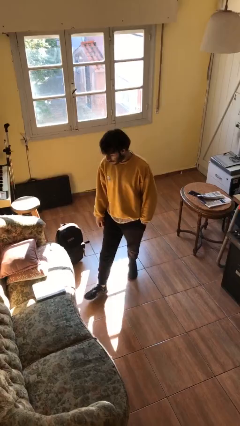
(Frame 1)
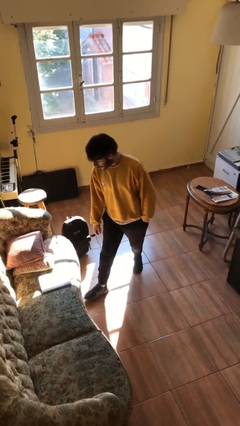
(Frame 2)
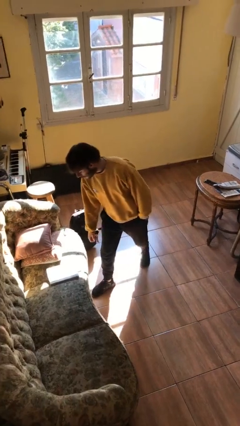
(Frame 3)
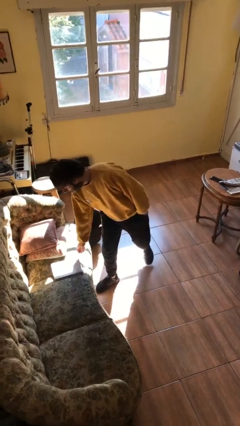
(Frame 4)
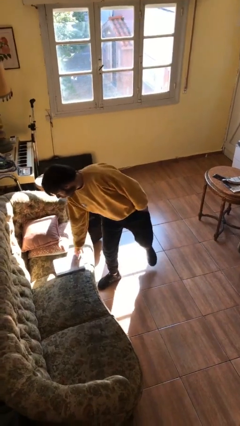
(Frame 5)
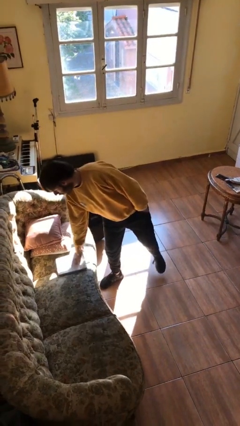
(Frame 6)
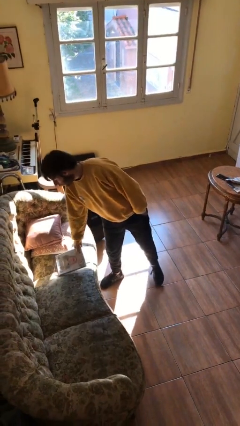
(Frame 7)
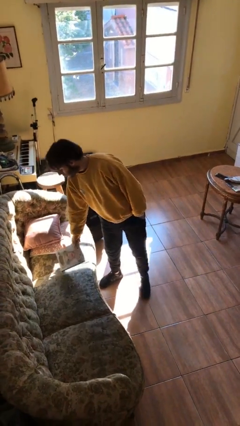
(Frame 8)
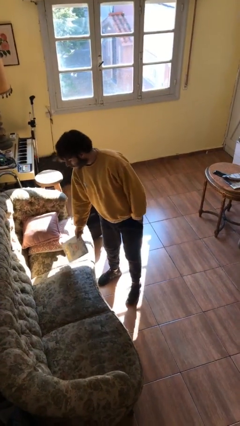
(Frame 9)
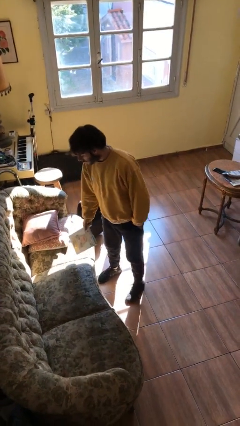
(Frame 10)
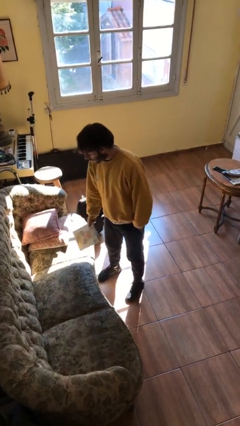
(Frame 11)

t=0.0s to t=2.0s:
person picks up object from couch

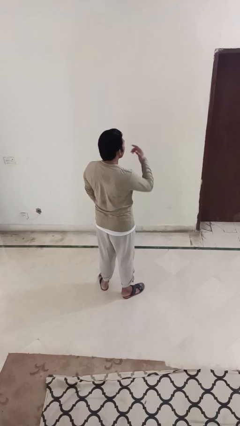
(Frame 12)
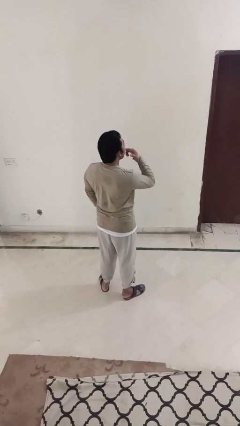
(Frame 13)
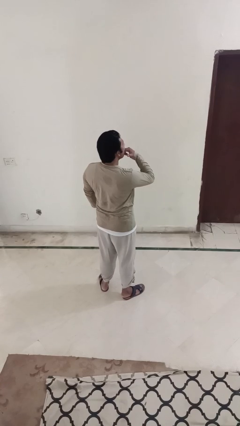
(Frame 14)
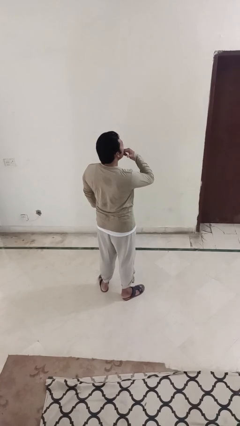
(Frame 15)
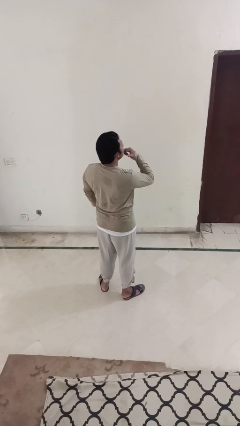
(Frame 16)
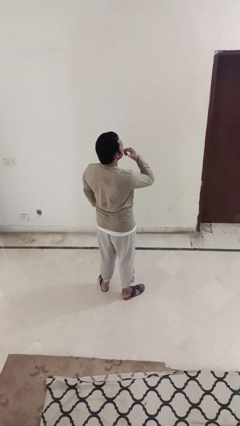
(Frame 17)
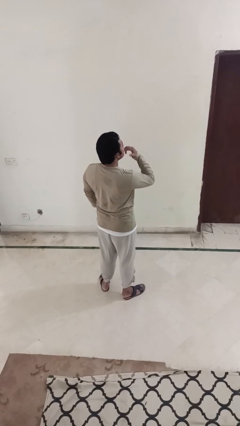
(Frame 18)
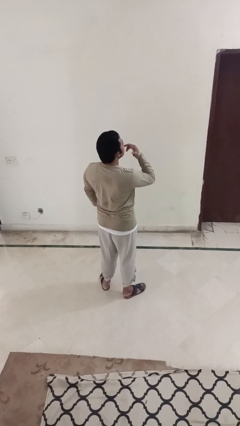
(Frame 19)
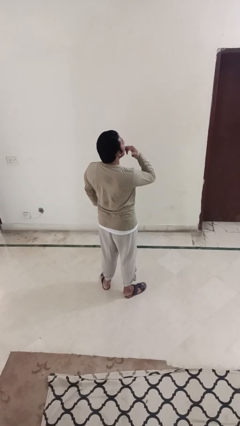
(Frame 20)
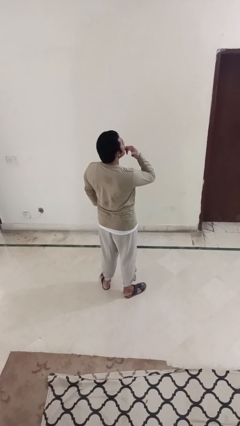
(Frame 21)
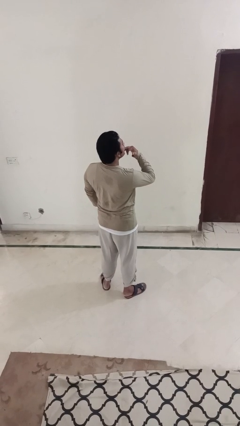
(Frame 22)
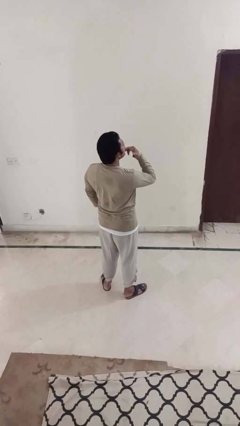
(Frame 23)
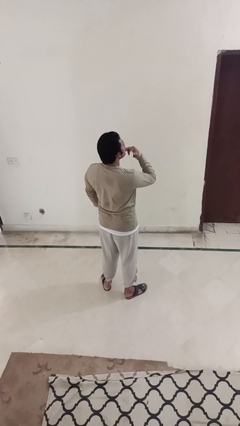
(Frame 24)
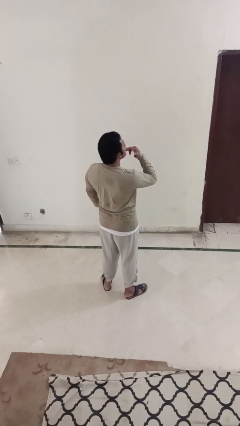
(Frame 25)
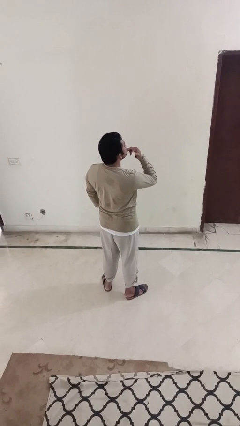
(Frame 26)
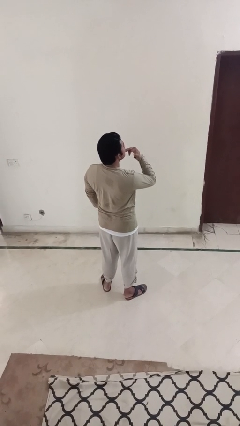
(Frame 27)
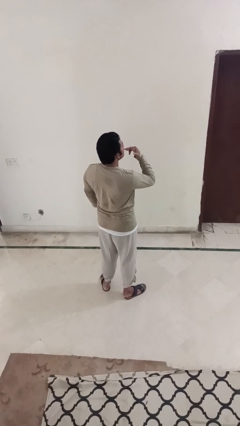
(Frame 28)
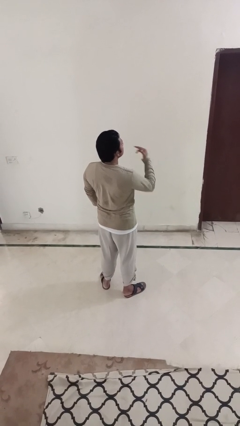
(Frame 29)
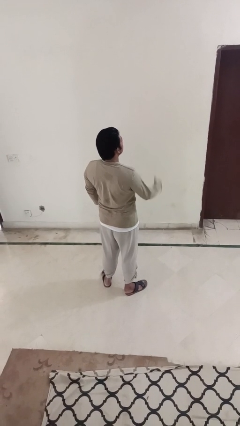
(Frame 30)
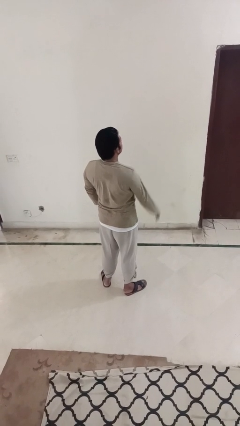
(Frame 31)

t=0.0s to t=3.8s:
person licks fingers

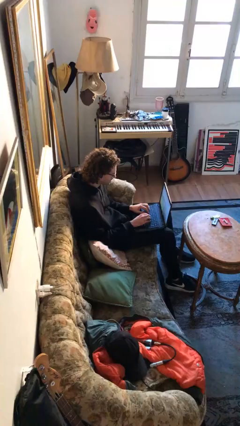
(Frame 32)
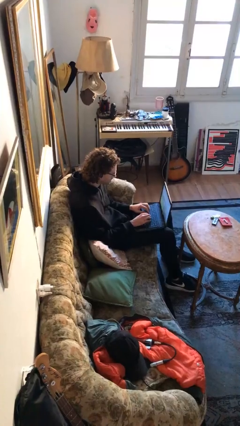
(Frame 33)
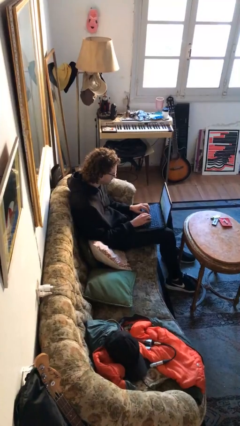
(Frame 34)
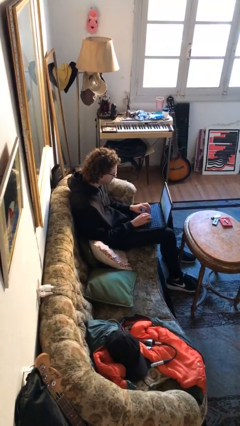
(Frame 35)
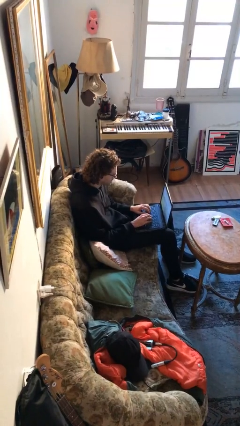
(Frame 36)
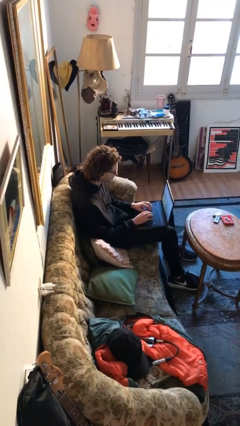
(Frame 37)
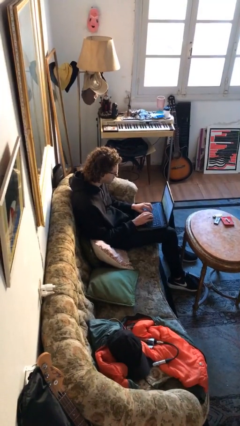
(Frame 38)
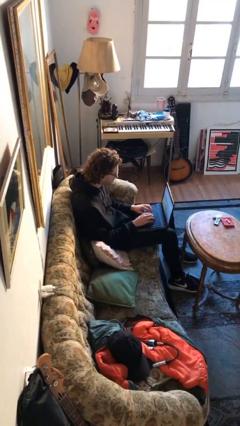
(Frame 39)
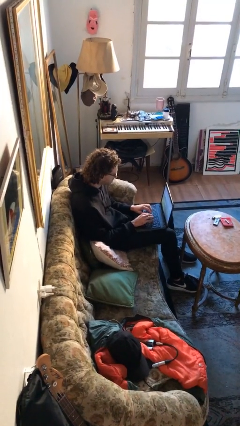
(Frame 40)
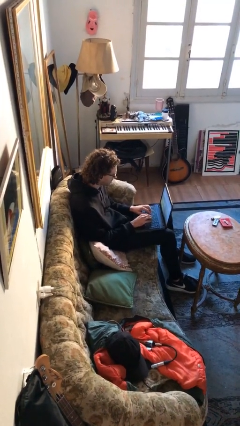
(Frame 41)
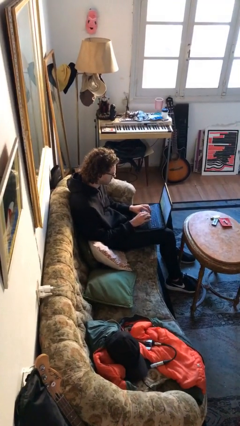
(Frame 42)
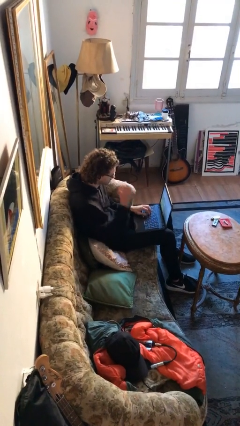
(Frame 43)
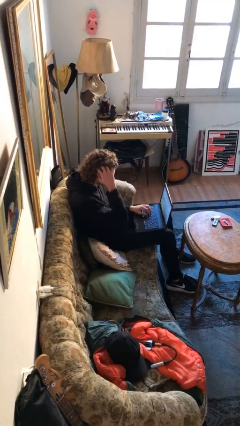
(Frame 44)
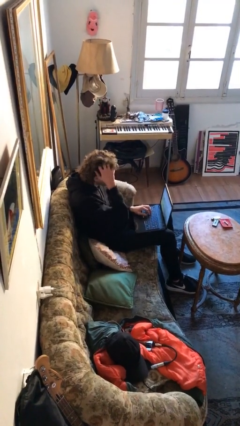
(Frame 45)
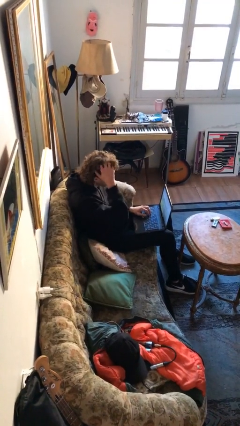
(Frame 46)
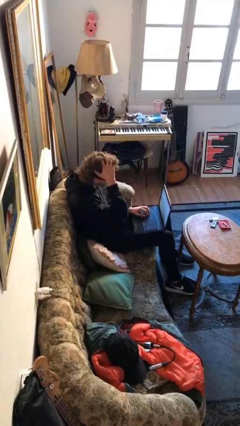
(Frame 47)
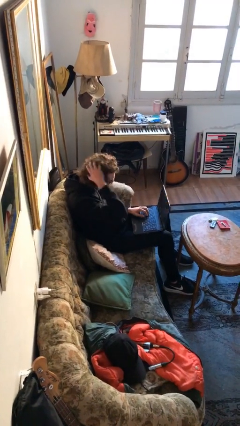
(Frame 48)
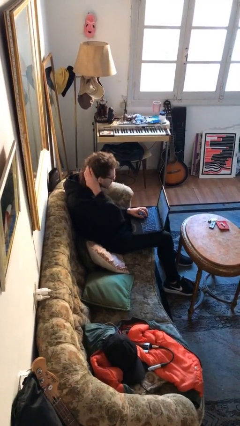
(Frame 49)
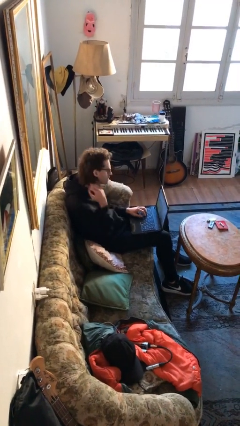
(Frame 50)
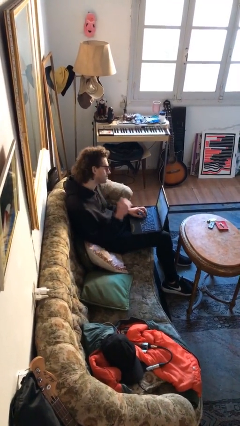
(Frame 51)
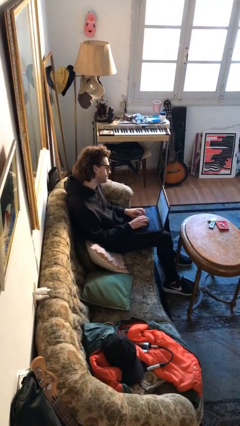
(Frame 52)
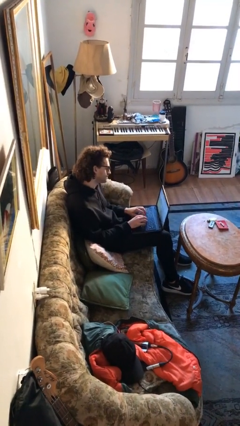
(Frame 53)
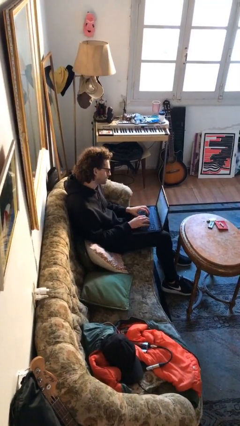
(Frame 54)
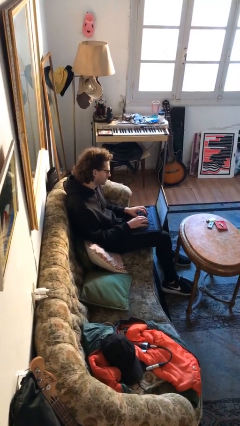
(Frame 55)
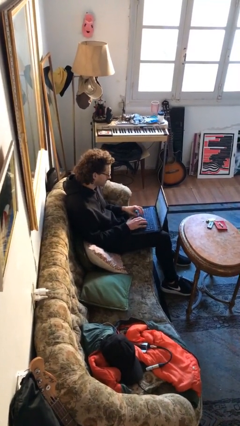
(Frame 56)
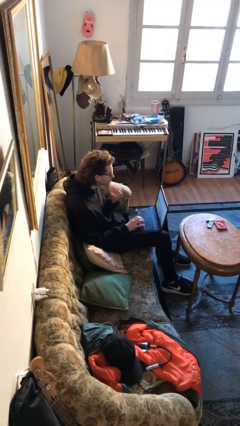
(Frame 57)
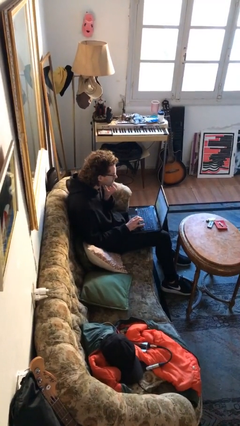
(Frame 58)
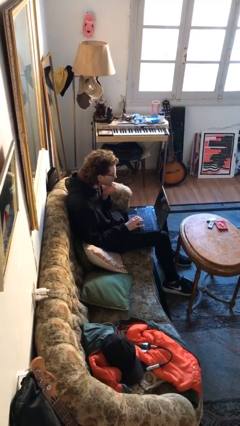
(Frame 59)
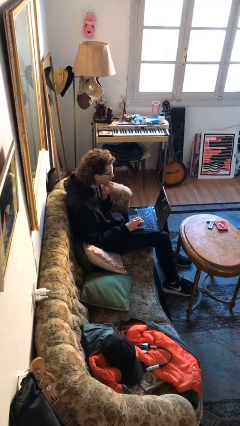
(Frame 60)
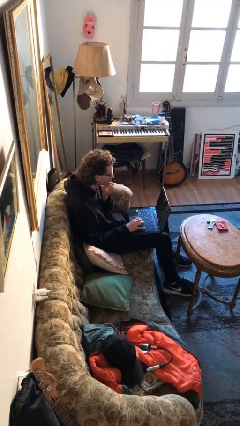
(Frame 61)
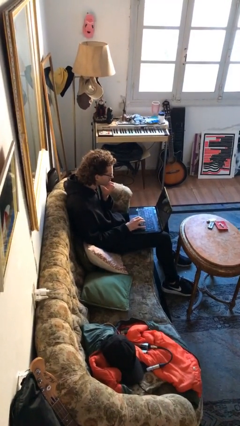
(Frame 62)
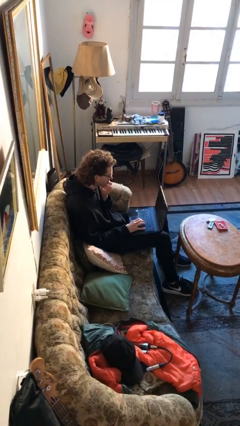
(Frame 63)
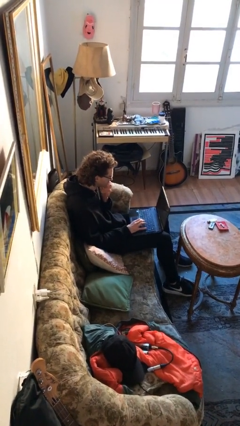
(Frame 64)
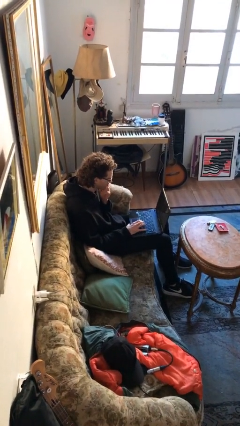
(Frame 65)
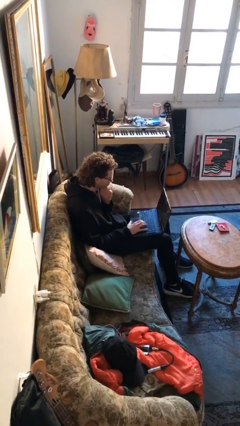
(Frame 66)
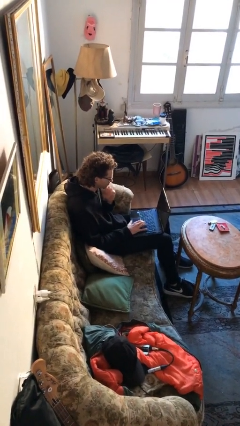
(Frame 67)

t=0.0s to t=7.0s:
person interacts with laptop

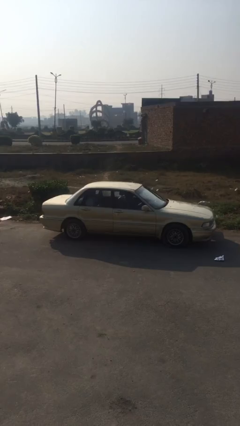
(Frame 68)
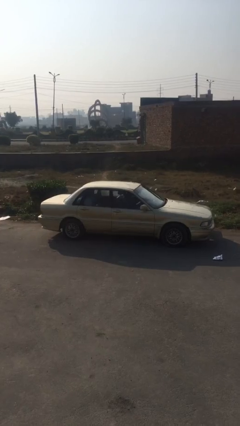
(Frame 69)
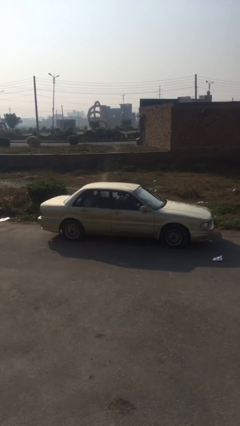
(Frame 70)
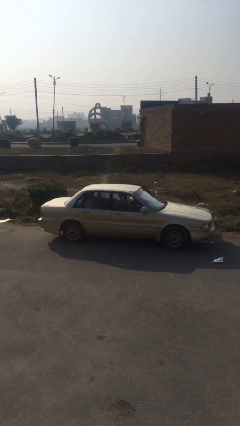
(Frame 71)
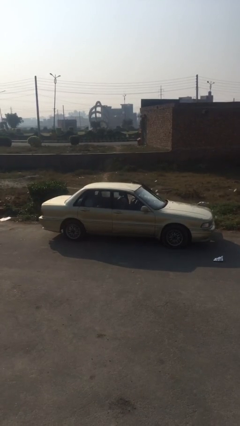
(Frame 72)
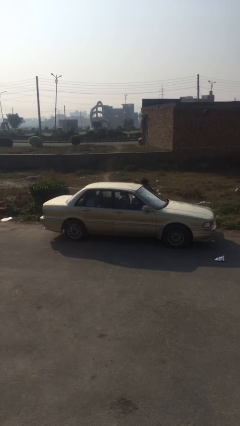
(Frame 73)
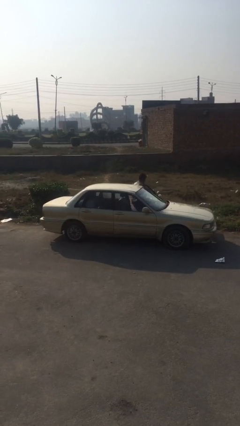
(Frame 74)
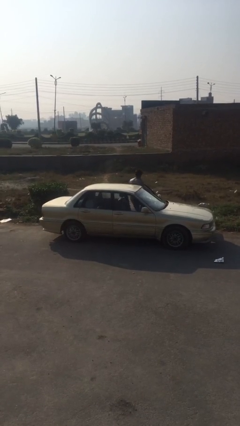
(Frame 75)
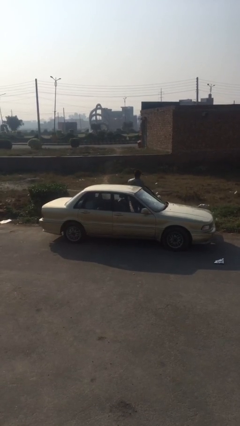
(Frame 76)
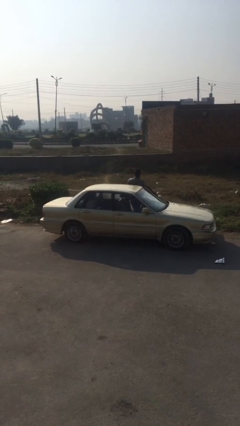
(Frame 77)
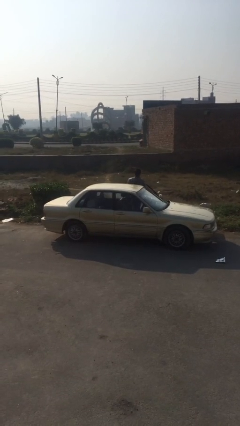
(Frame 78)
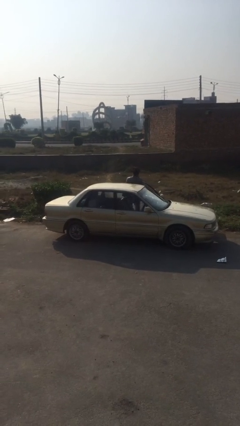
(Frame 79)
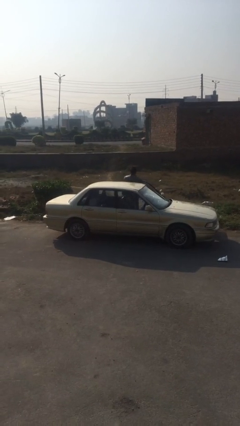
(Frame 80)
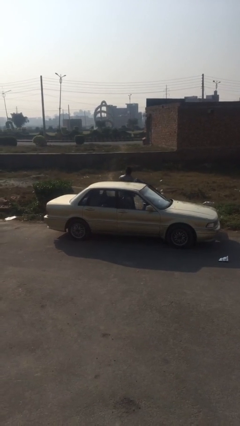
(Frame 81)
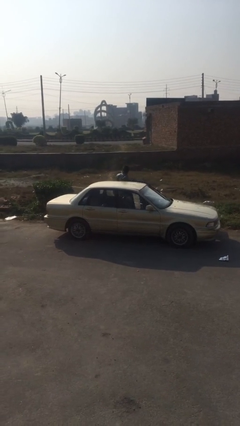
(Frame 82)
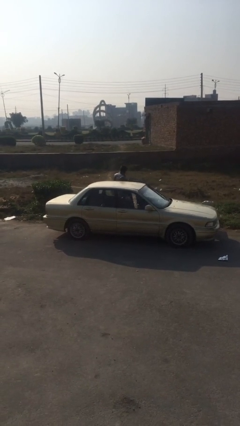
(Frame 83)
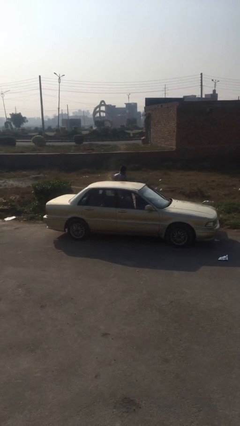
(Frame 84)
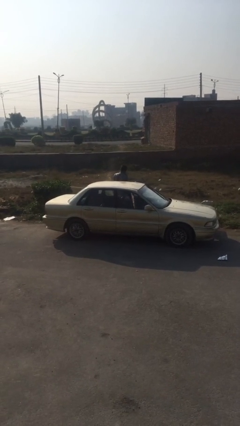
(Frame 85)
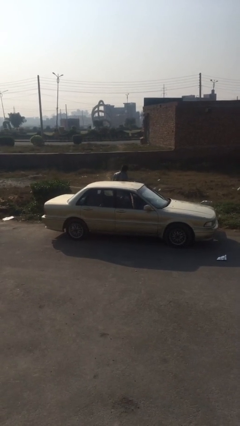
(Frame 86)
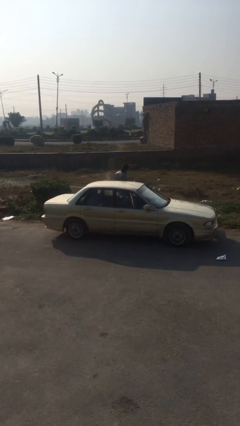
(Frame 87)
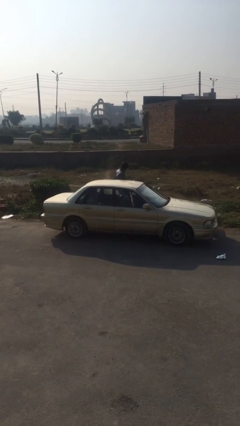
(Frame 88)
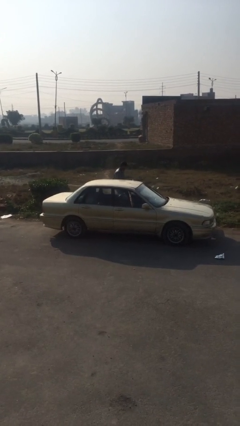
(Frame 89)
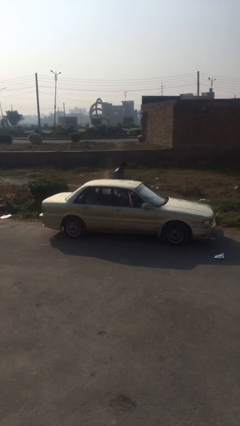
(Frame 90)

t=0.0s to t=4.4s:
car drops off person

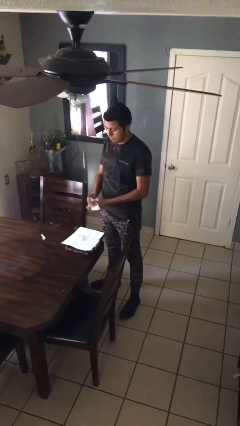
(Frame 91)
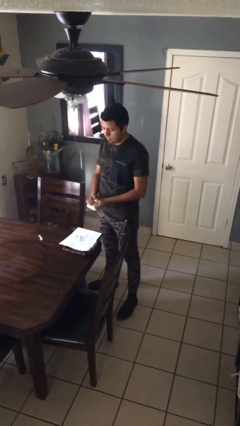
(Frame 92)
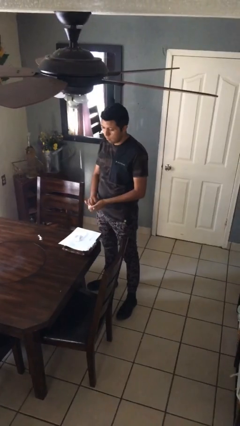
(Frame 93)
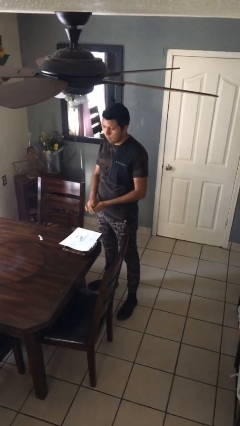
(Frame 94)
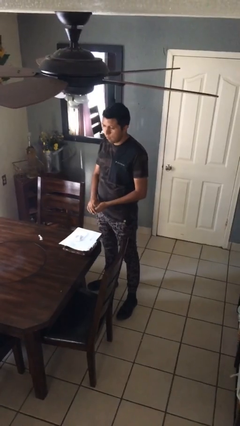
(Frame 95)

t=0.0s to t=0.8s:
person crumples paper
